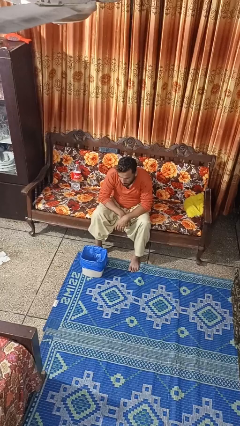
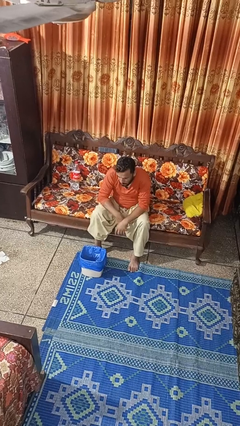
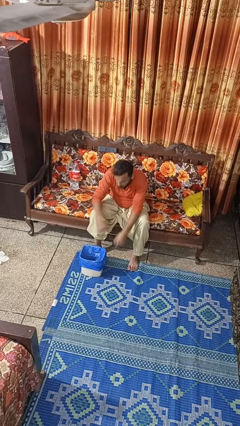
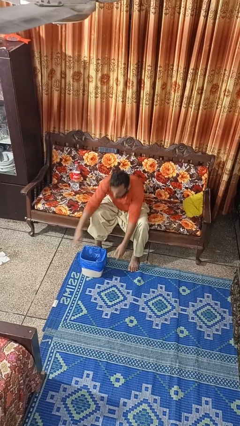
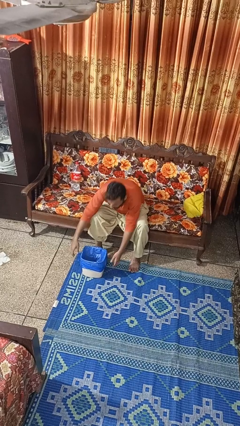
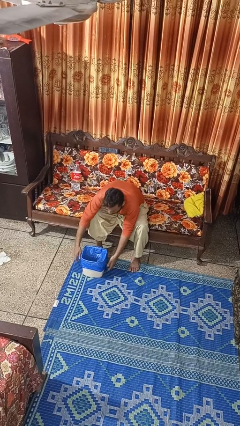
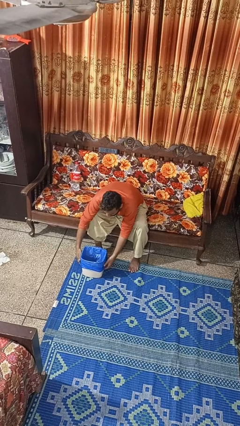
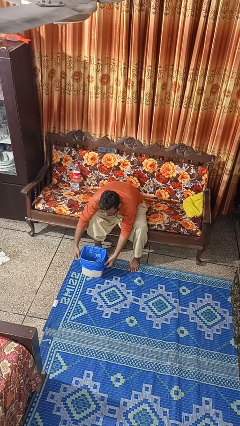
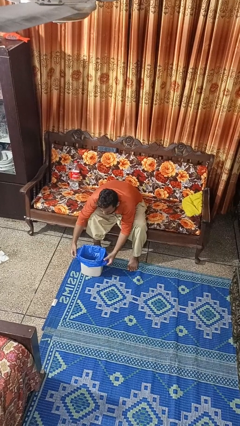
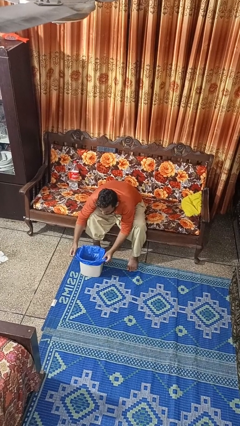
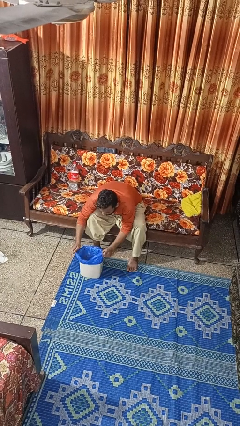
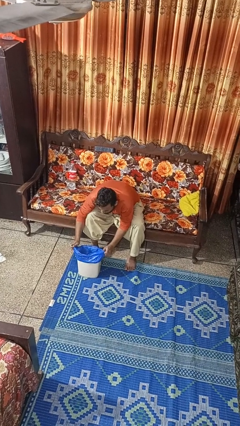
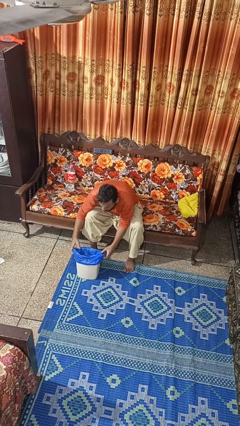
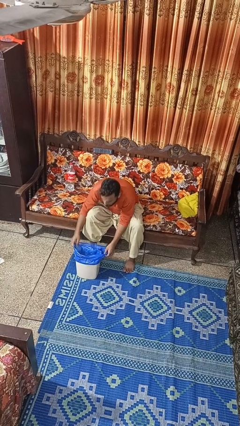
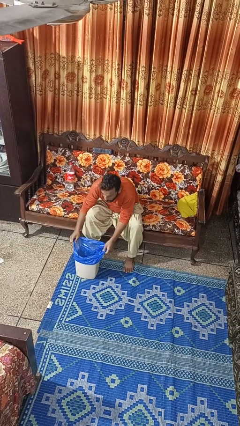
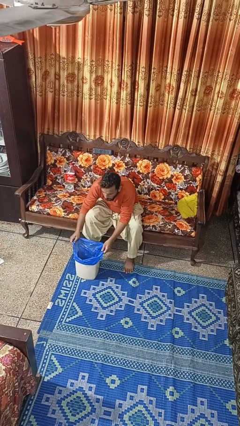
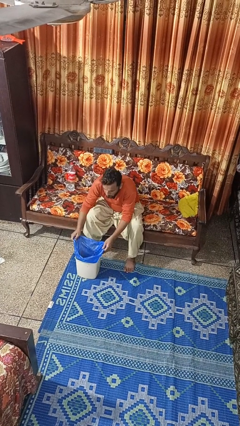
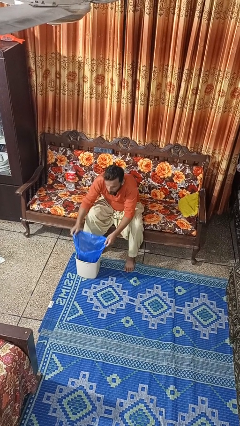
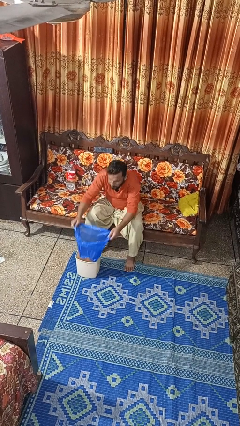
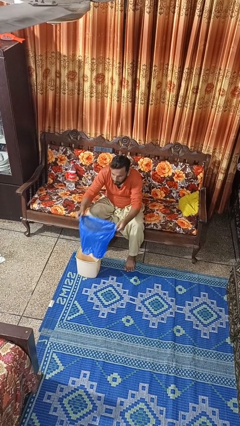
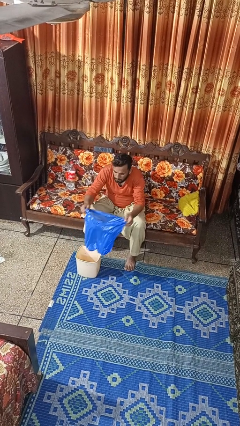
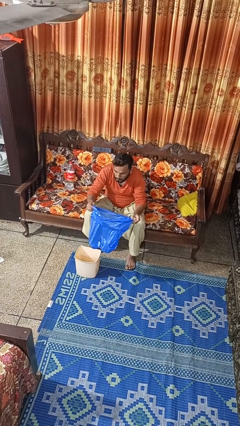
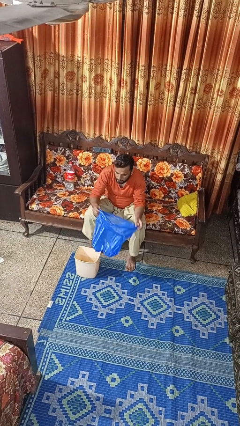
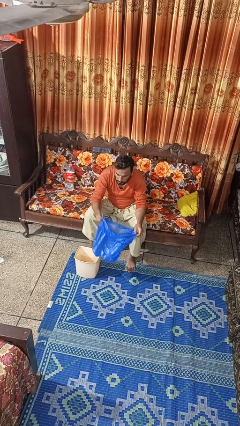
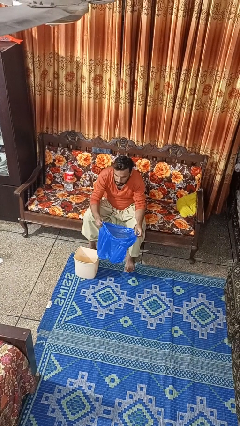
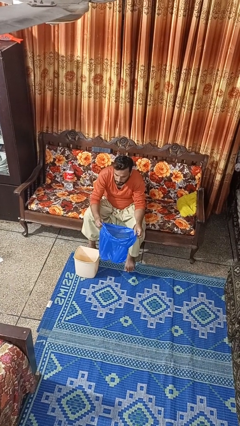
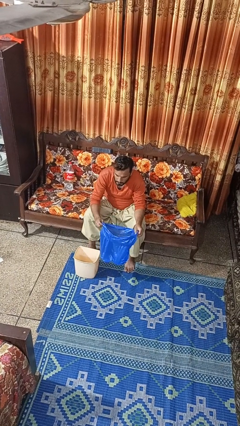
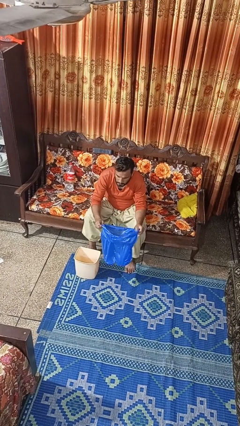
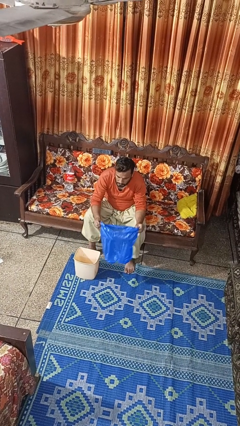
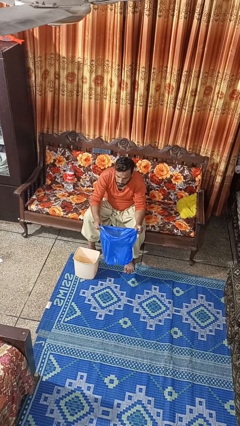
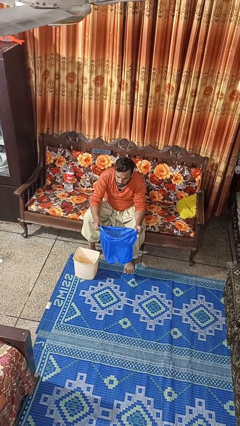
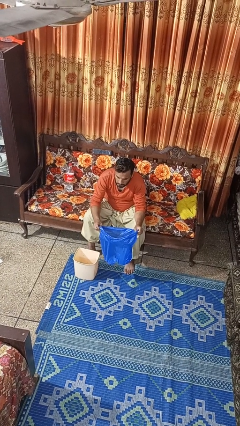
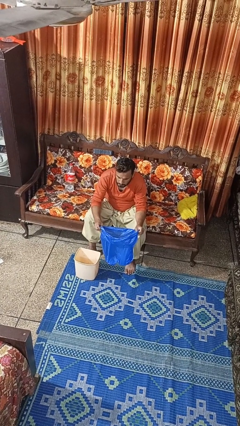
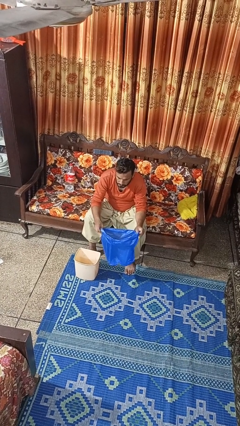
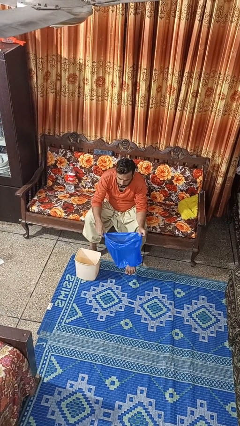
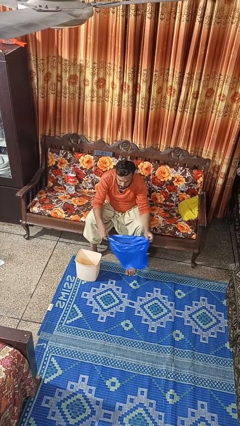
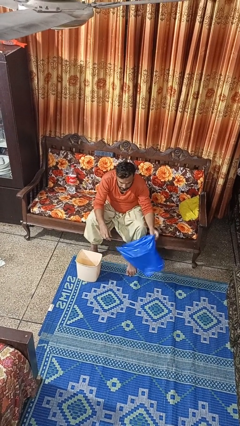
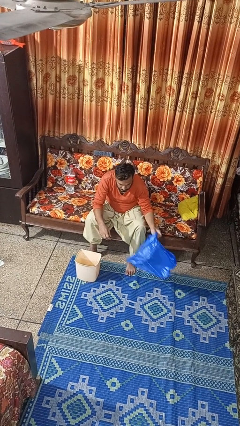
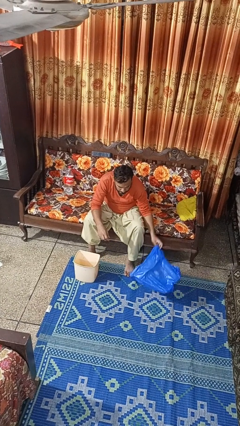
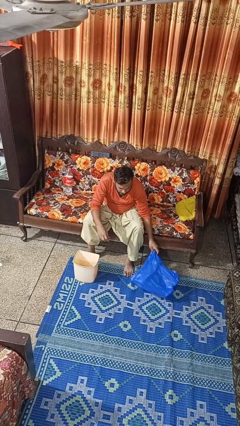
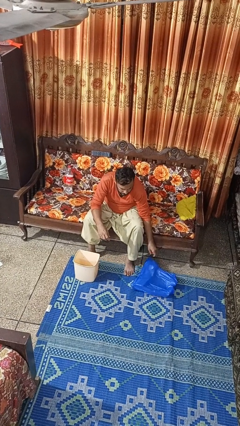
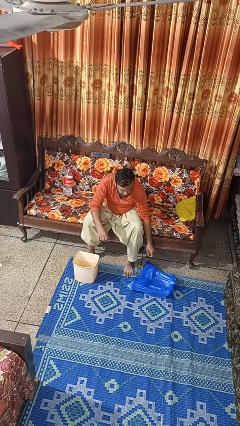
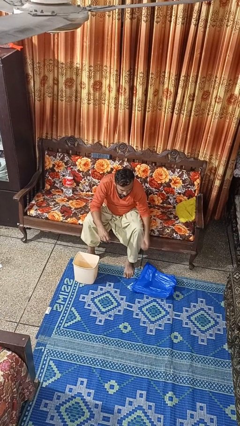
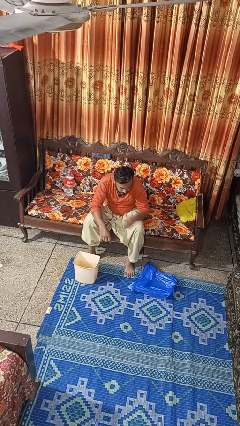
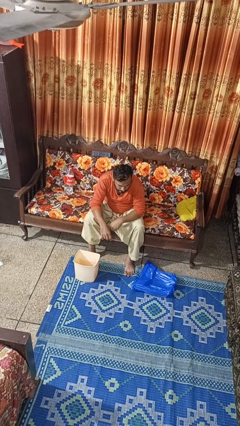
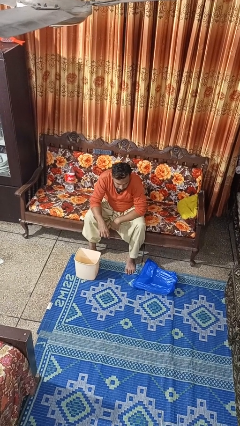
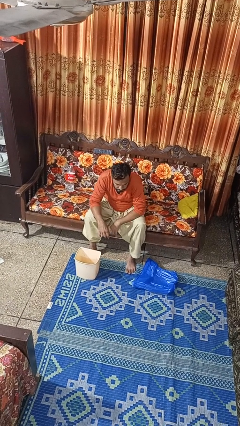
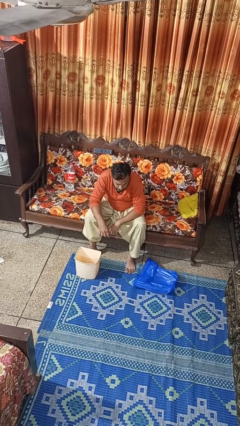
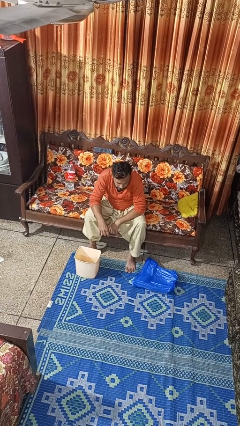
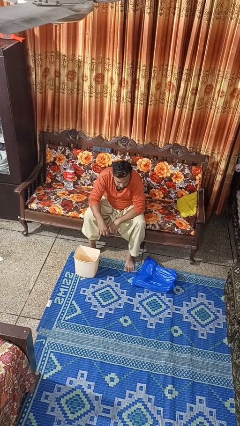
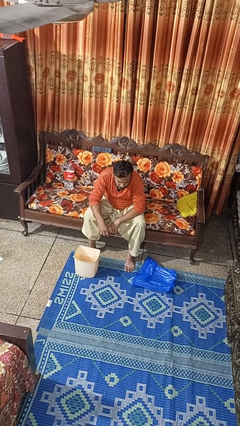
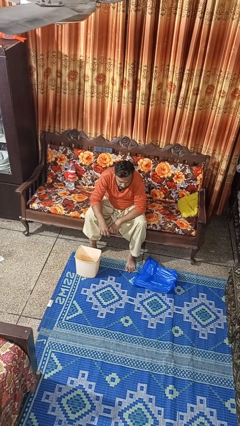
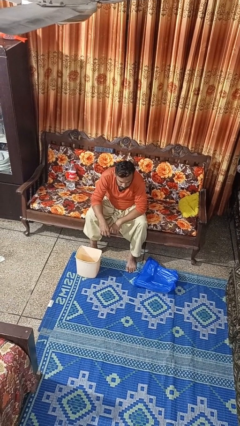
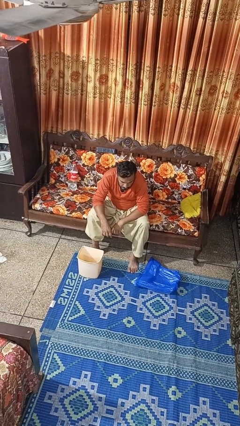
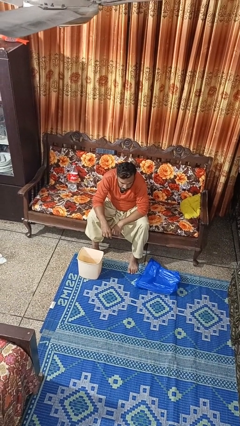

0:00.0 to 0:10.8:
person removes trashbag from trashcan

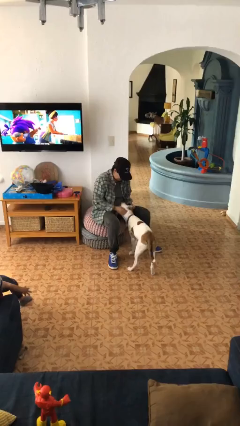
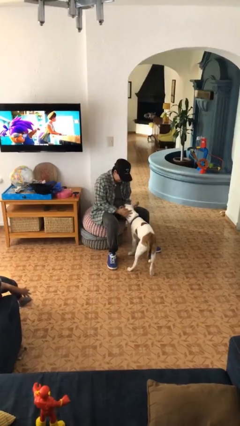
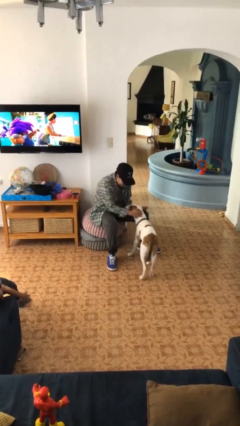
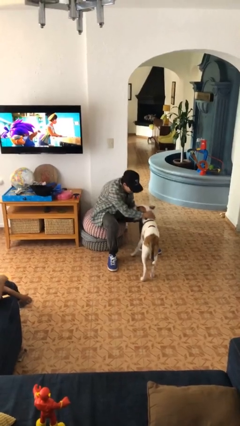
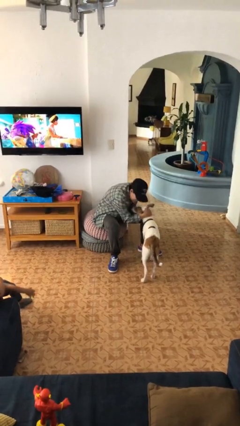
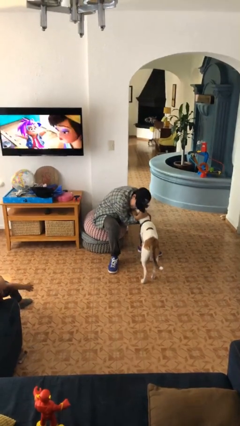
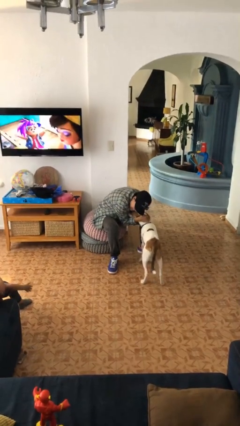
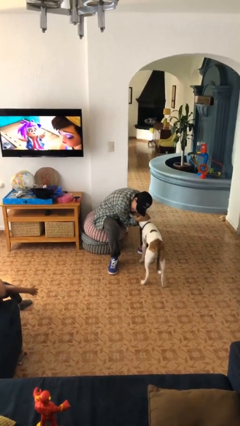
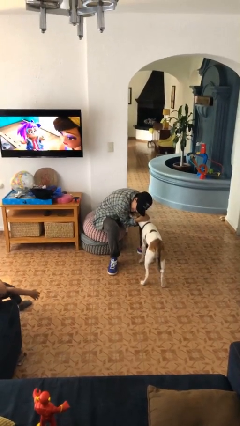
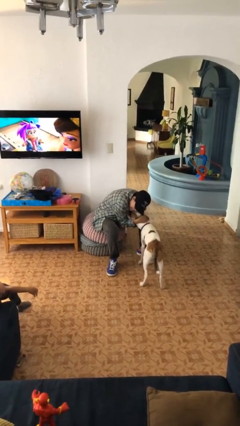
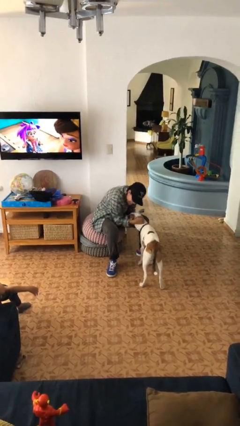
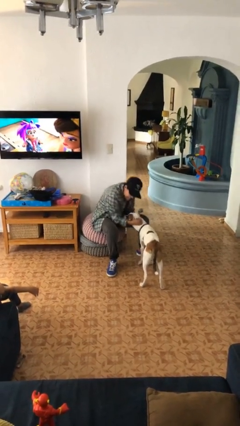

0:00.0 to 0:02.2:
person hugs cat

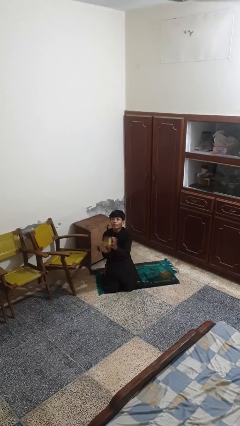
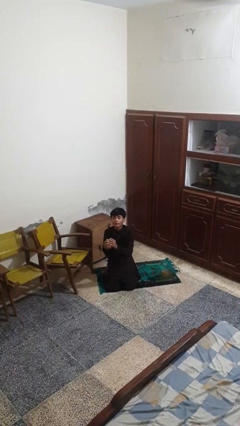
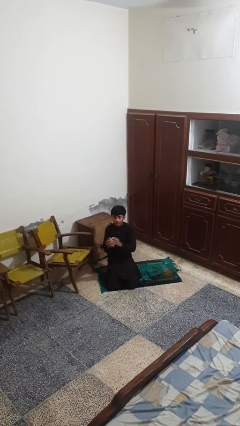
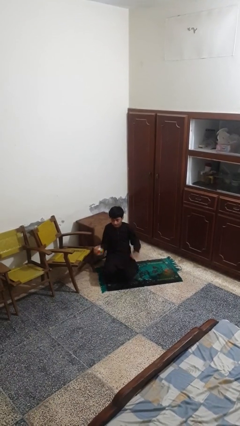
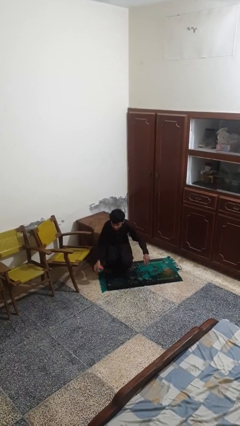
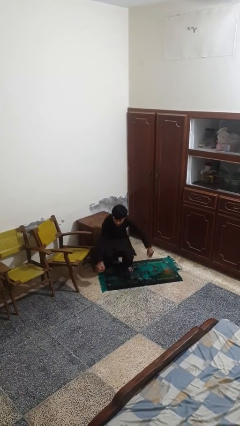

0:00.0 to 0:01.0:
person catches dropped object

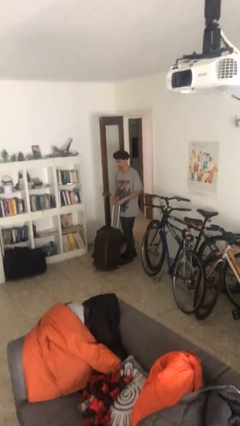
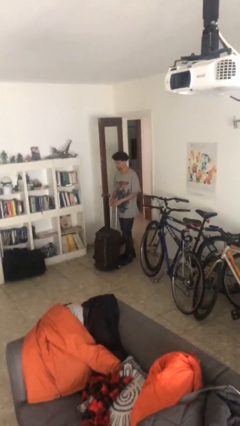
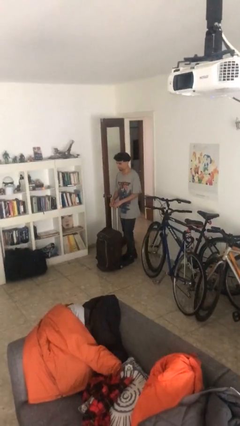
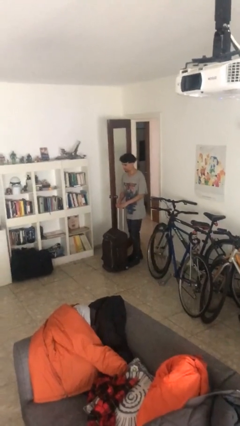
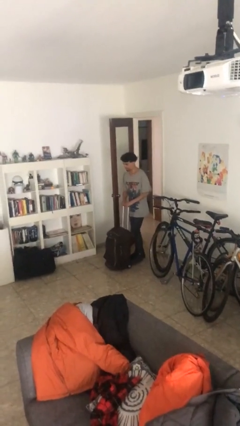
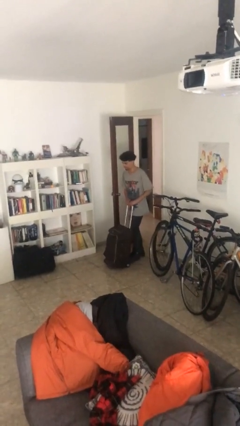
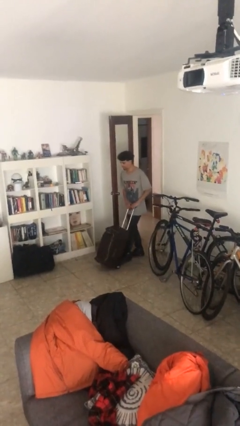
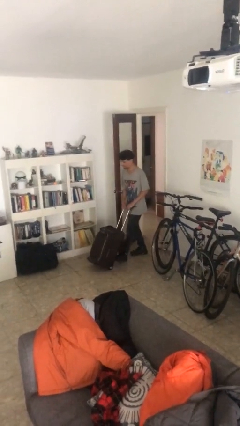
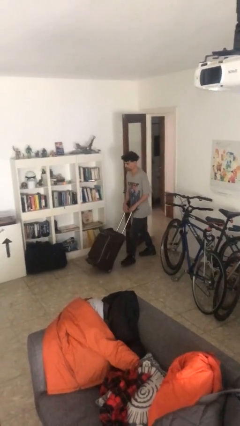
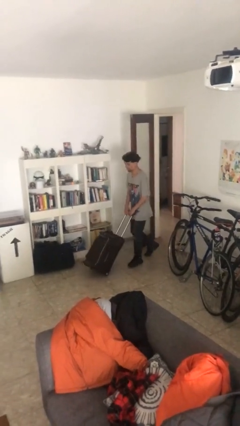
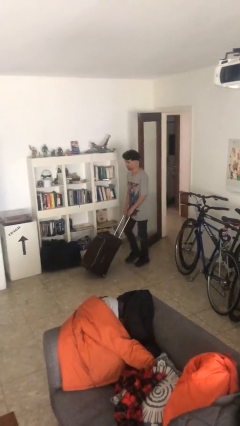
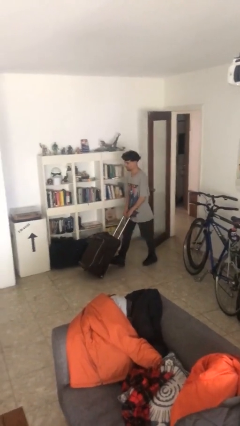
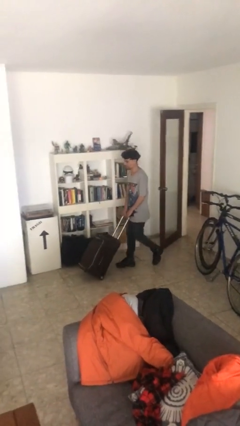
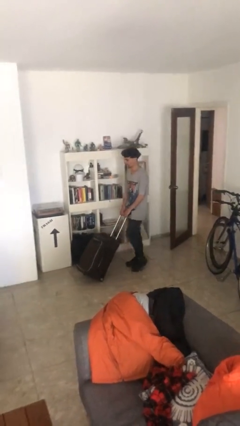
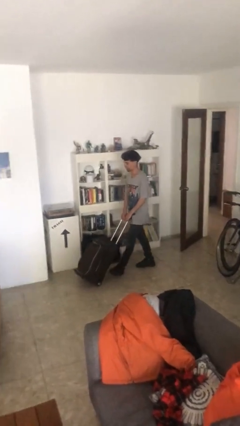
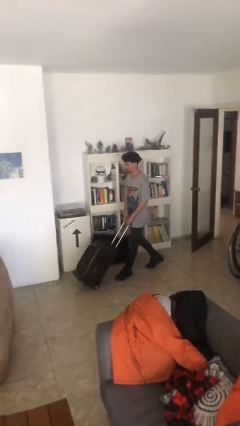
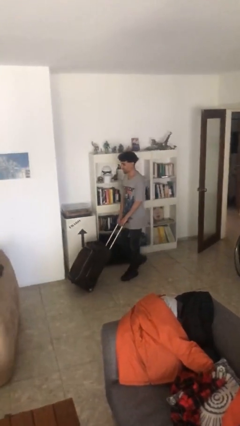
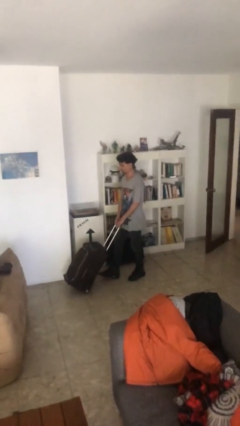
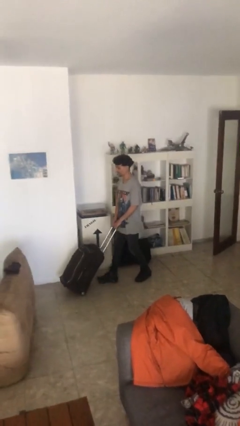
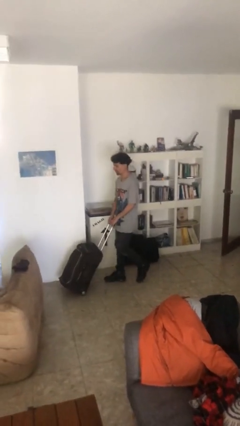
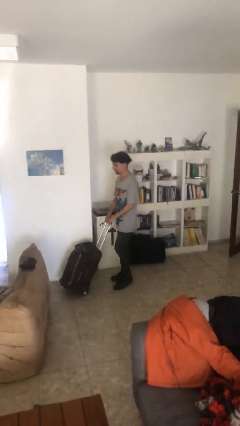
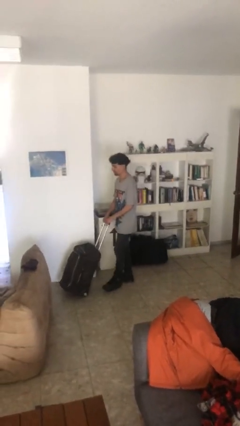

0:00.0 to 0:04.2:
person pushes wheeled cart
